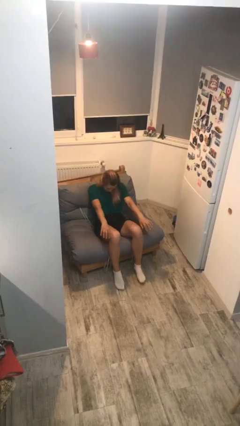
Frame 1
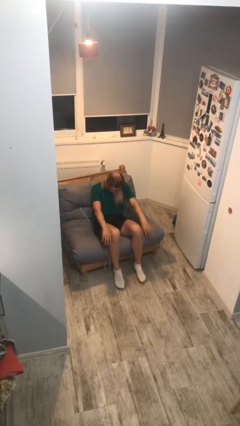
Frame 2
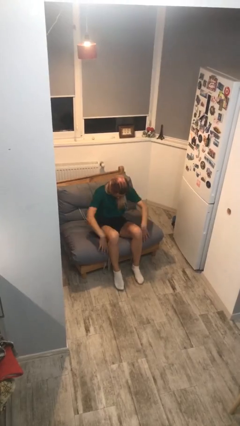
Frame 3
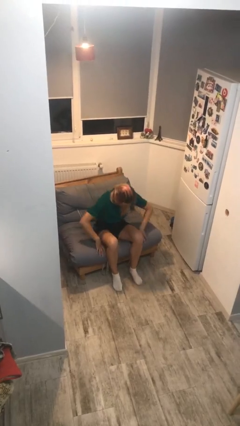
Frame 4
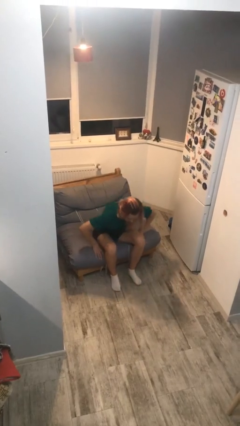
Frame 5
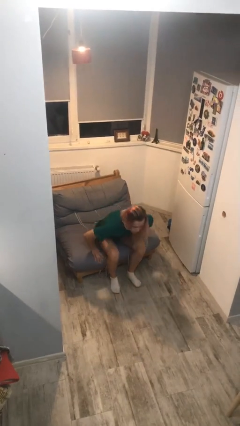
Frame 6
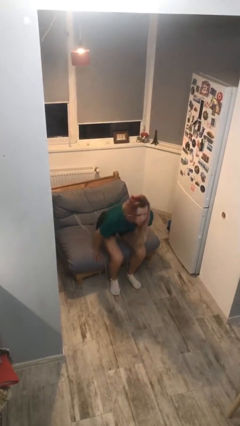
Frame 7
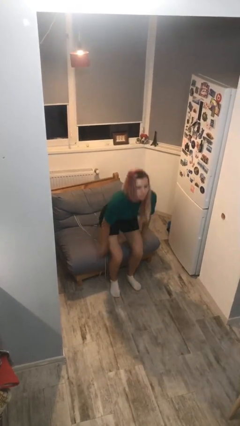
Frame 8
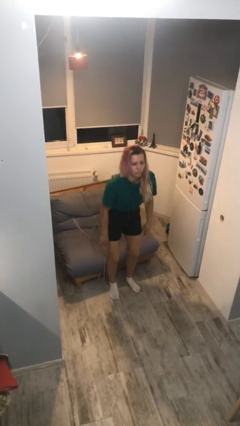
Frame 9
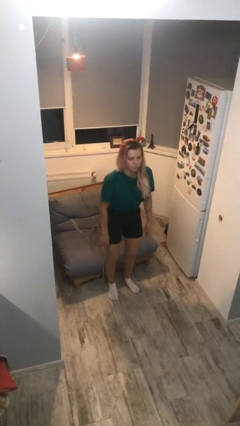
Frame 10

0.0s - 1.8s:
person stands up

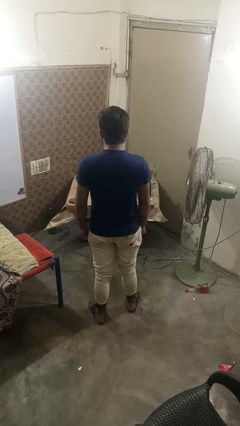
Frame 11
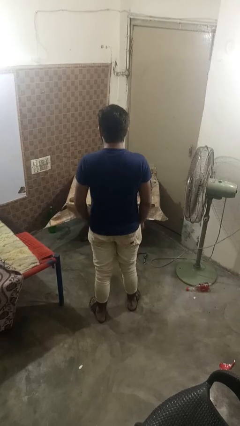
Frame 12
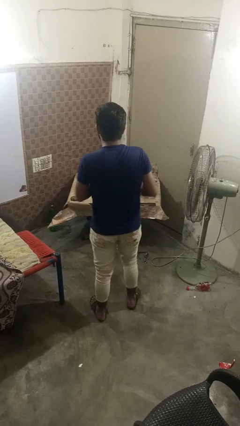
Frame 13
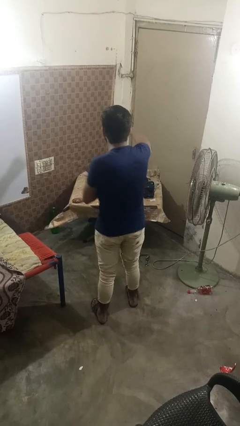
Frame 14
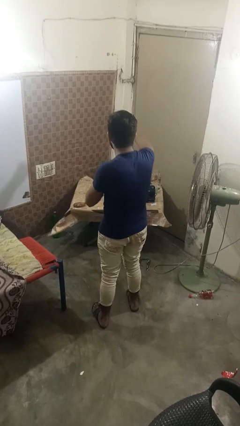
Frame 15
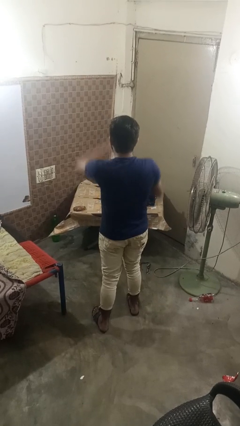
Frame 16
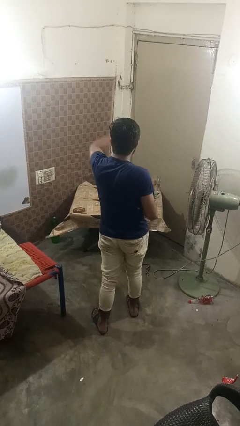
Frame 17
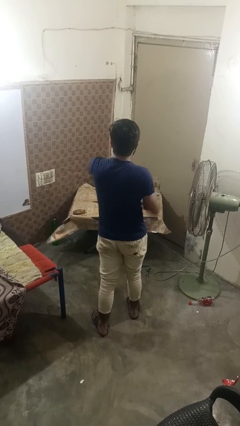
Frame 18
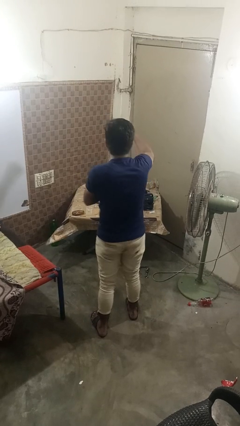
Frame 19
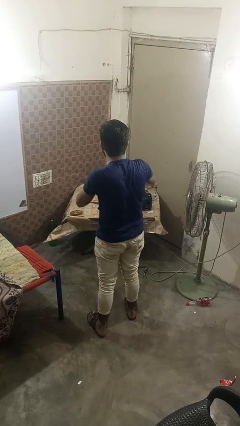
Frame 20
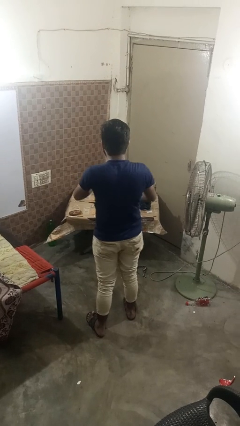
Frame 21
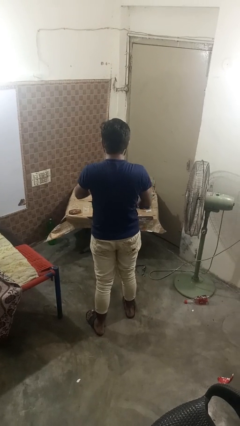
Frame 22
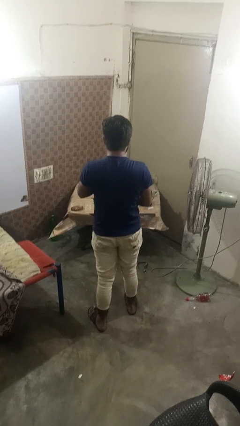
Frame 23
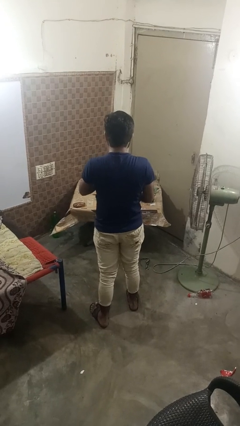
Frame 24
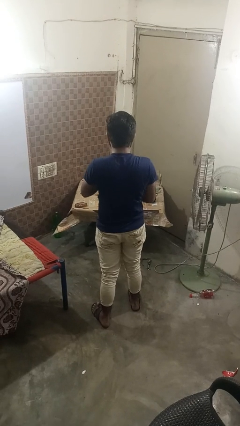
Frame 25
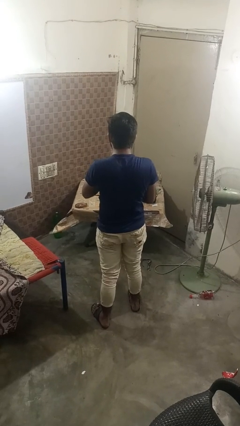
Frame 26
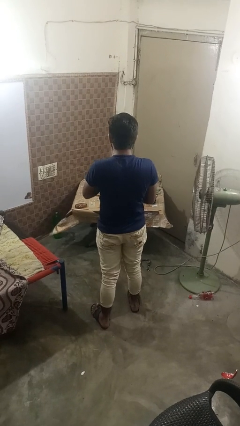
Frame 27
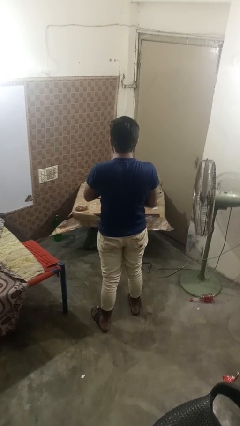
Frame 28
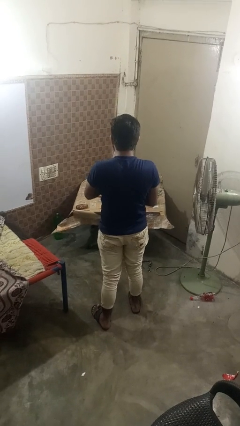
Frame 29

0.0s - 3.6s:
person punches

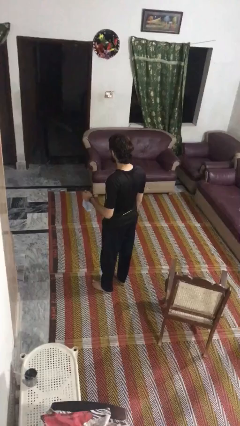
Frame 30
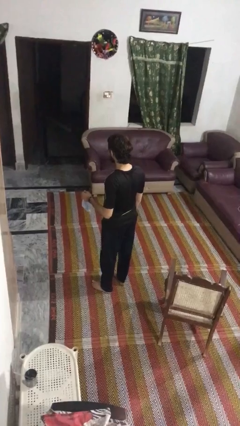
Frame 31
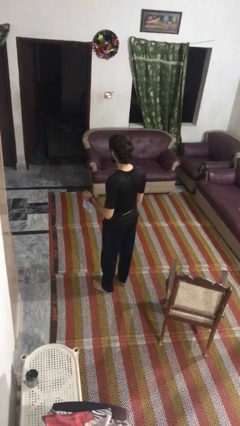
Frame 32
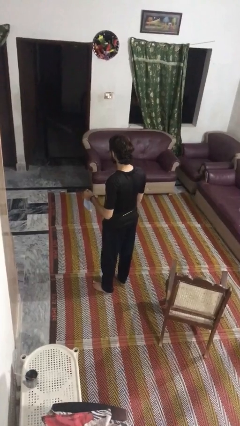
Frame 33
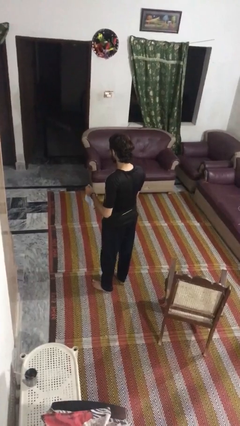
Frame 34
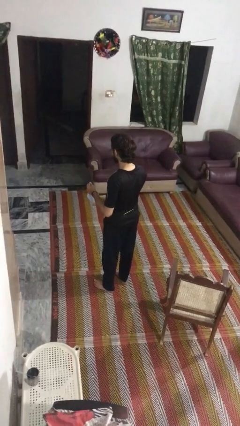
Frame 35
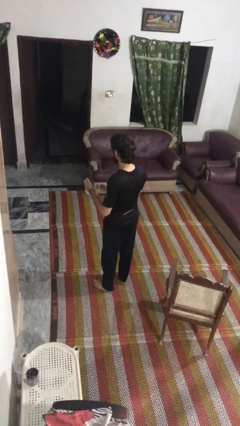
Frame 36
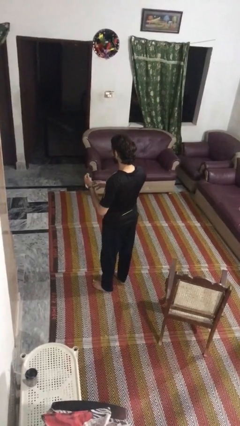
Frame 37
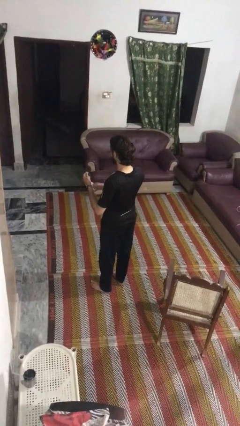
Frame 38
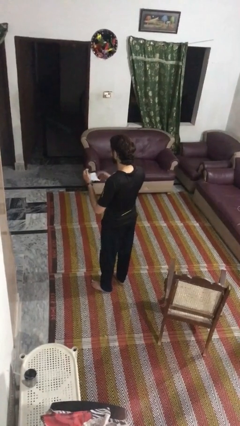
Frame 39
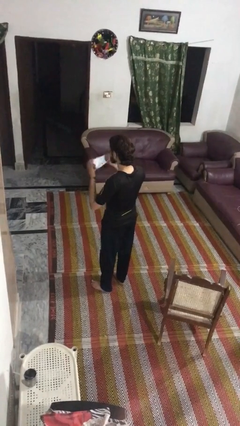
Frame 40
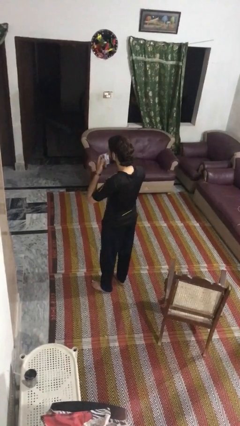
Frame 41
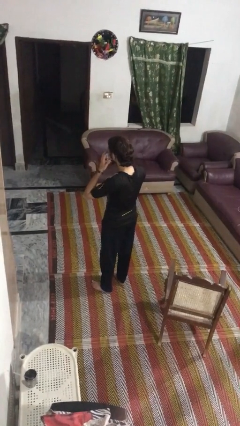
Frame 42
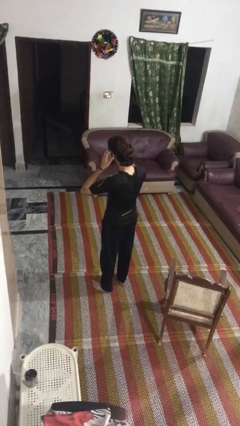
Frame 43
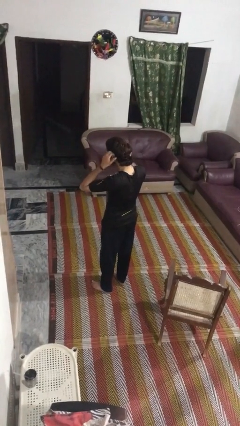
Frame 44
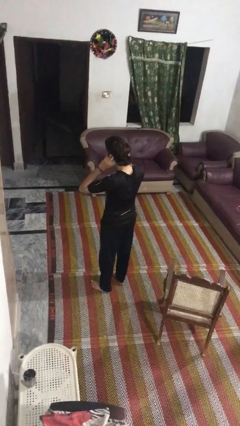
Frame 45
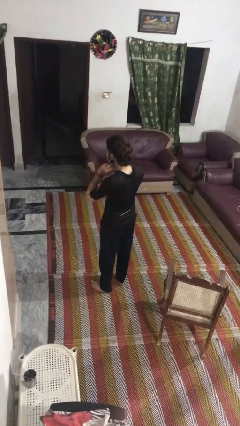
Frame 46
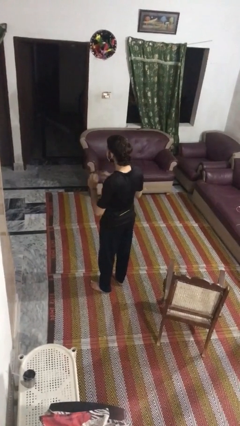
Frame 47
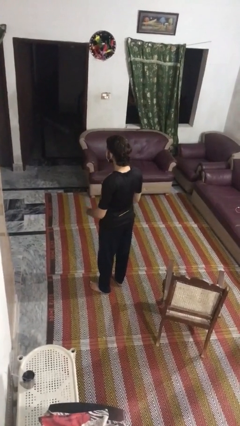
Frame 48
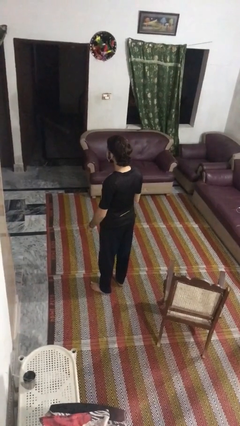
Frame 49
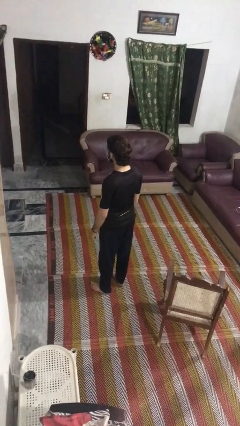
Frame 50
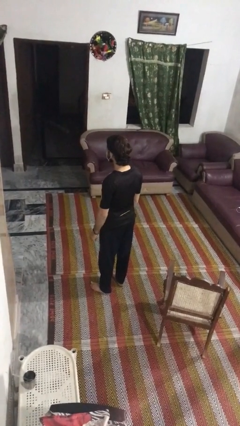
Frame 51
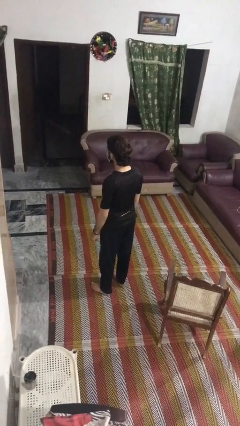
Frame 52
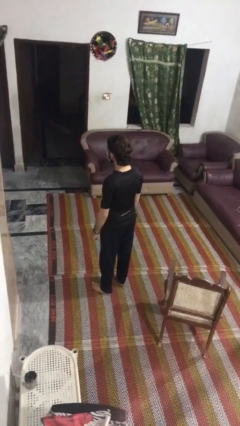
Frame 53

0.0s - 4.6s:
person puts on facemask

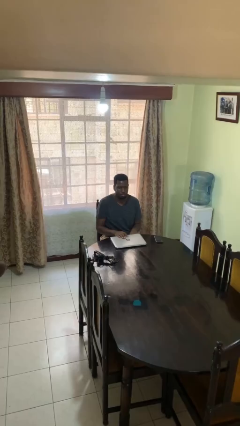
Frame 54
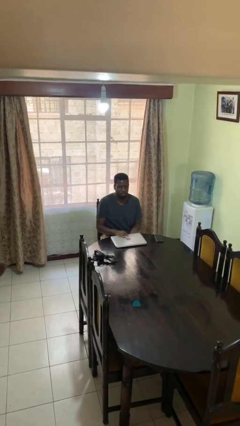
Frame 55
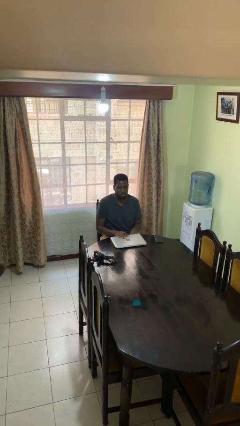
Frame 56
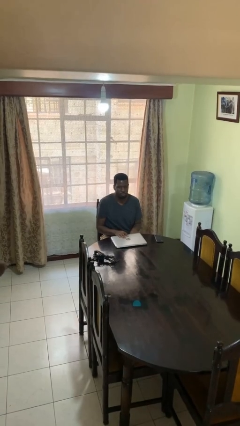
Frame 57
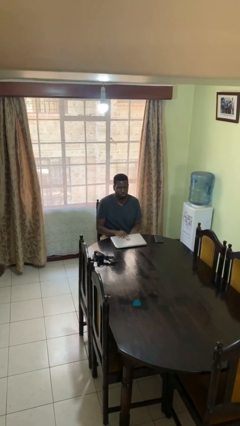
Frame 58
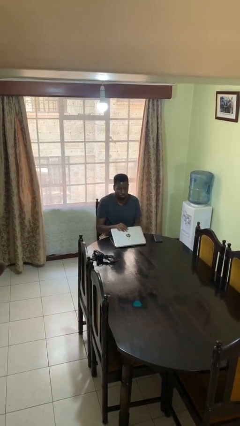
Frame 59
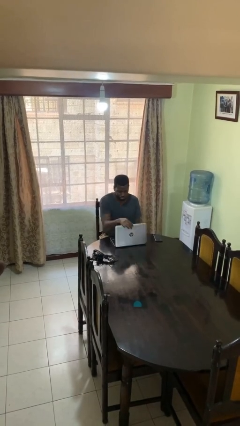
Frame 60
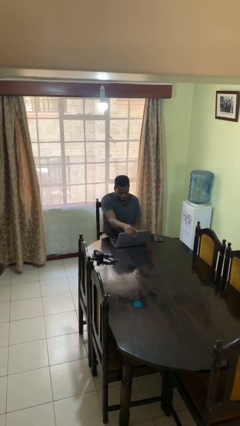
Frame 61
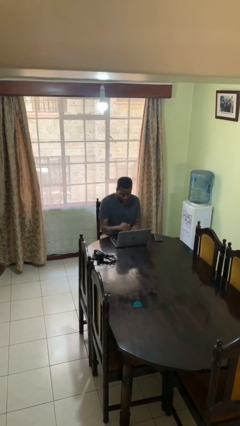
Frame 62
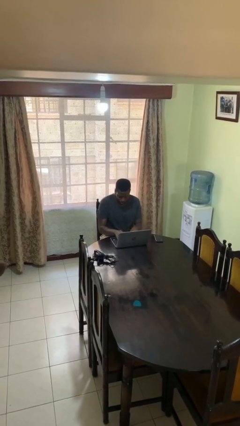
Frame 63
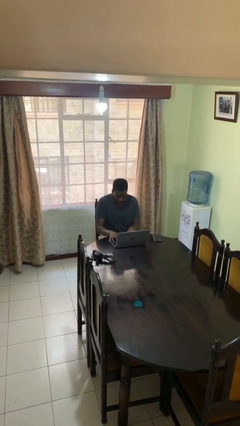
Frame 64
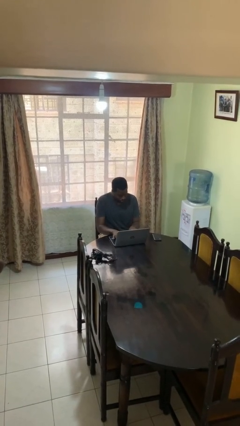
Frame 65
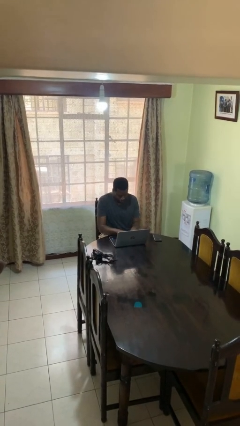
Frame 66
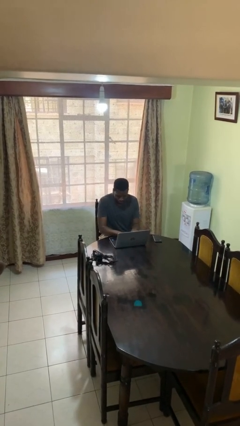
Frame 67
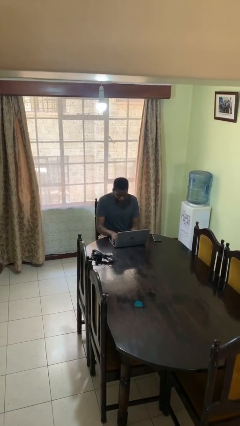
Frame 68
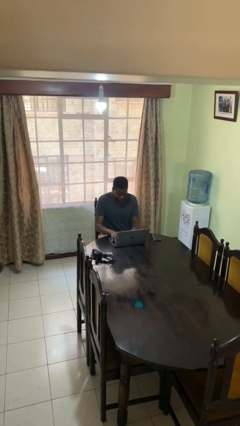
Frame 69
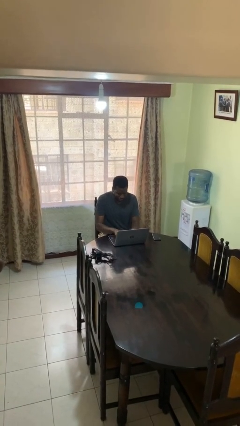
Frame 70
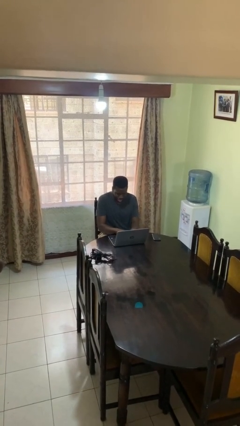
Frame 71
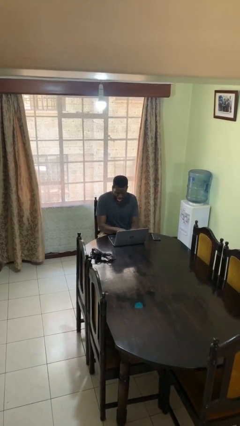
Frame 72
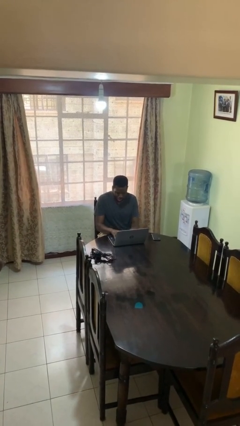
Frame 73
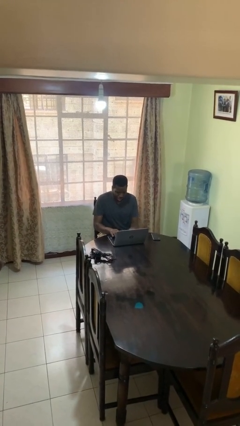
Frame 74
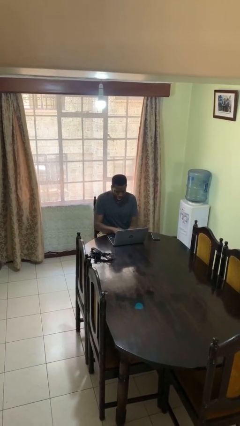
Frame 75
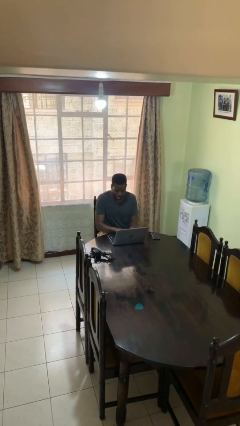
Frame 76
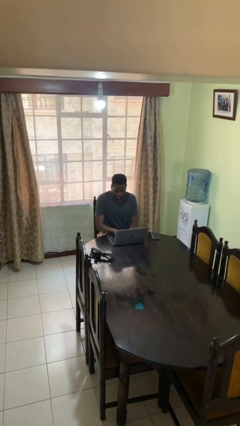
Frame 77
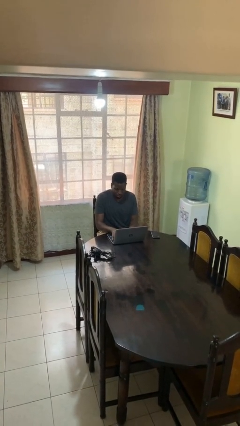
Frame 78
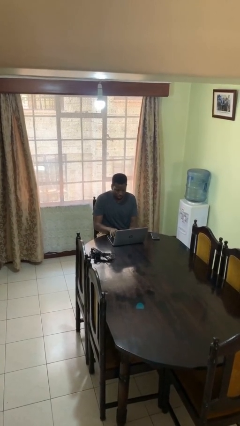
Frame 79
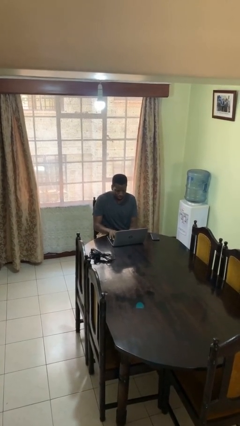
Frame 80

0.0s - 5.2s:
person interacts with laptop

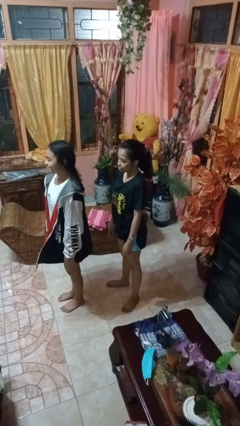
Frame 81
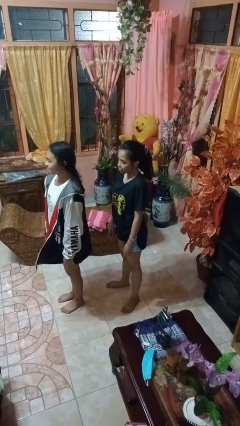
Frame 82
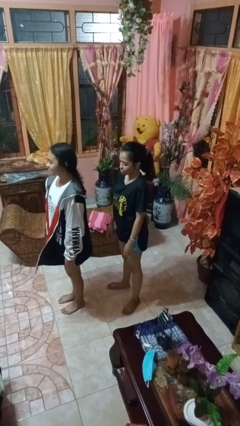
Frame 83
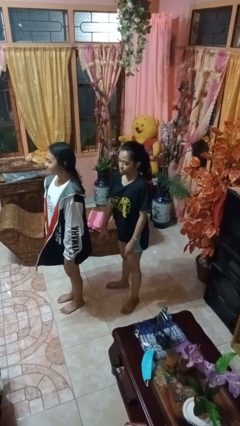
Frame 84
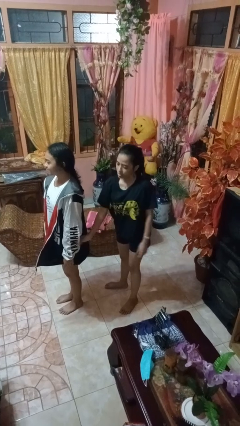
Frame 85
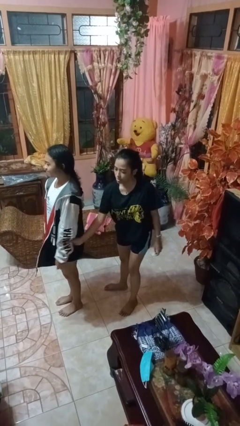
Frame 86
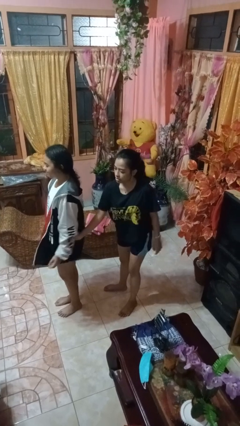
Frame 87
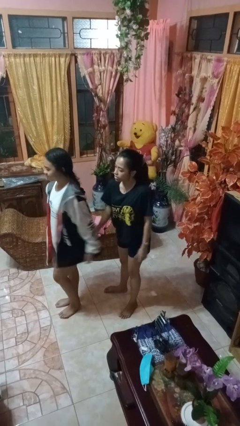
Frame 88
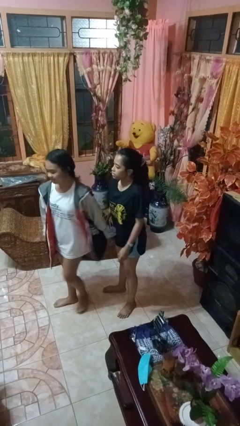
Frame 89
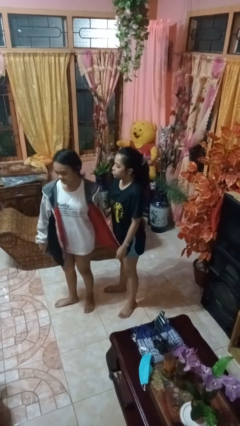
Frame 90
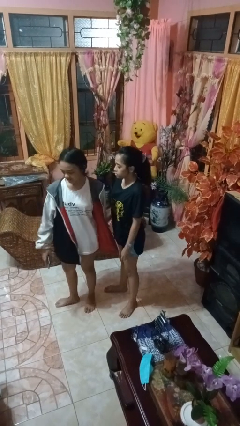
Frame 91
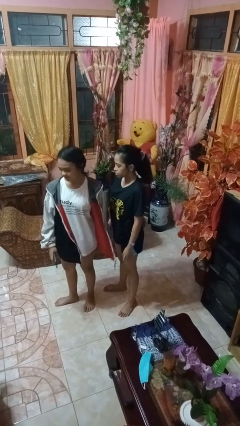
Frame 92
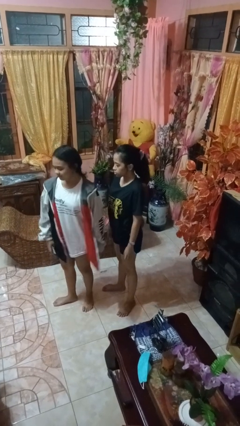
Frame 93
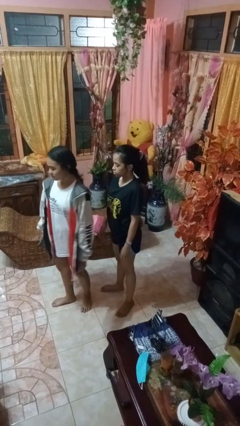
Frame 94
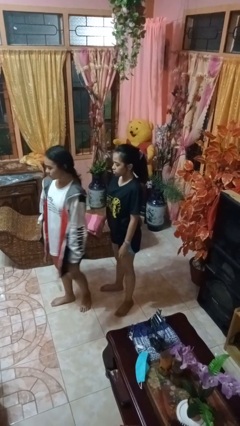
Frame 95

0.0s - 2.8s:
person grabs person by forearm
